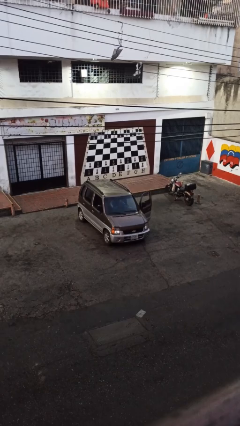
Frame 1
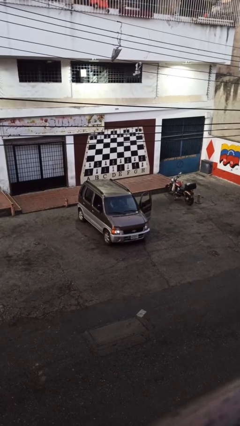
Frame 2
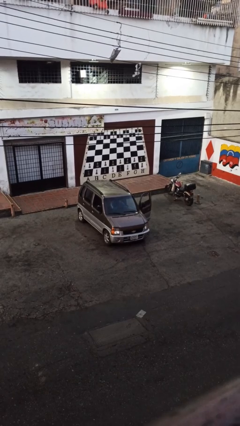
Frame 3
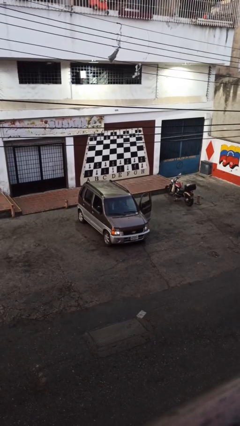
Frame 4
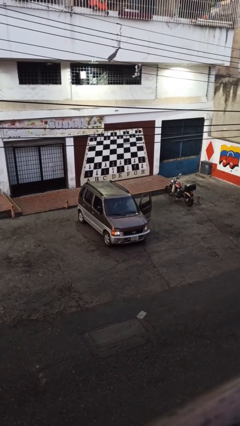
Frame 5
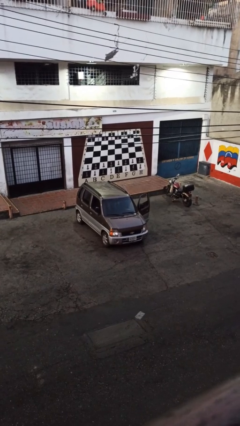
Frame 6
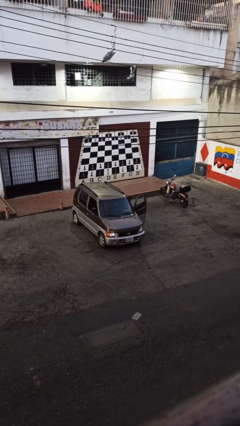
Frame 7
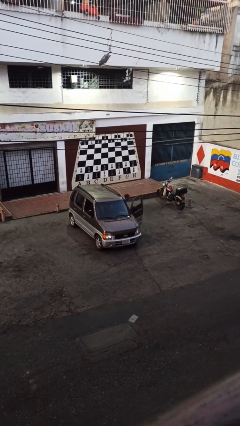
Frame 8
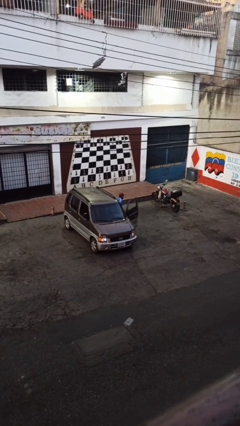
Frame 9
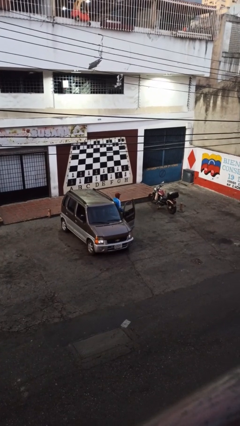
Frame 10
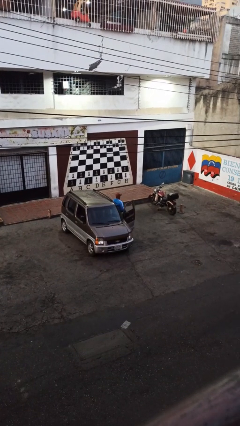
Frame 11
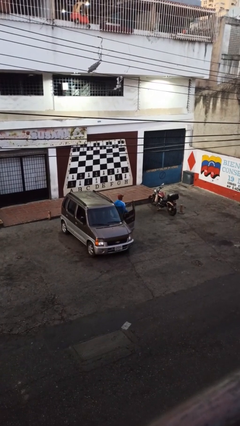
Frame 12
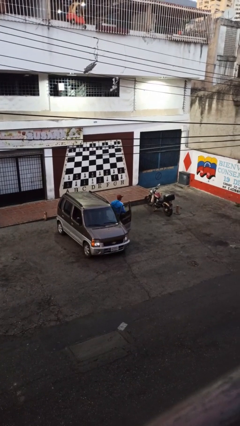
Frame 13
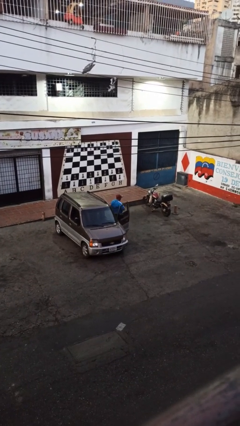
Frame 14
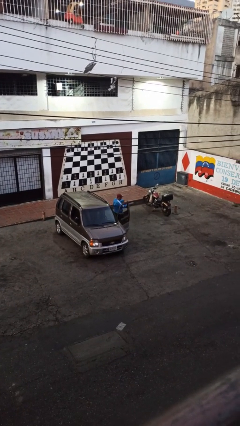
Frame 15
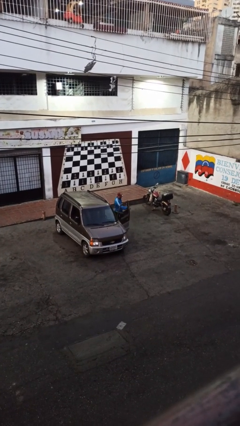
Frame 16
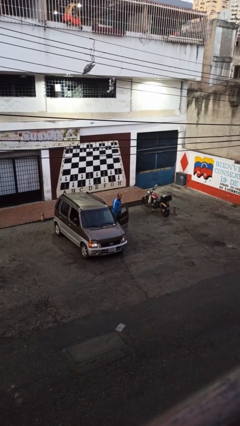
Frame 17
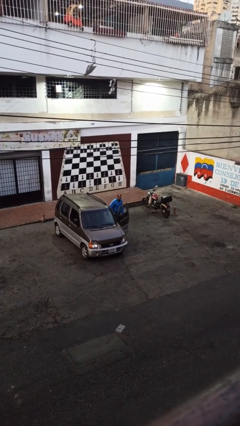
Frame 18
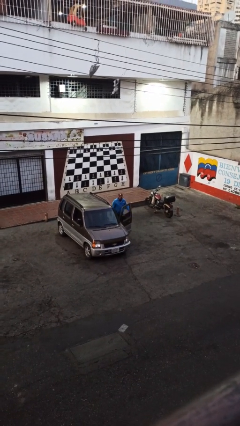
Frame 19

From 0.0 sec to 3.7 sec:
person exits car

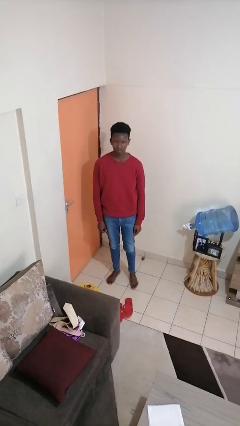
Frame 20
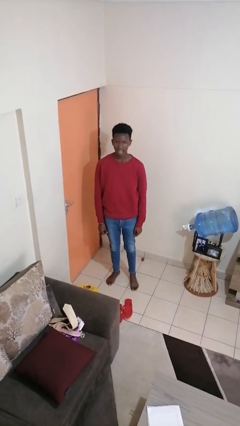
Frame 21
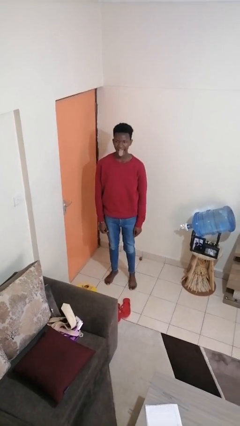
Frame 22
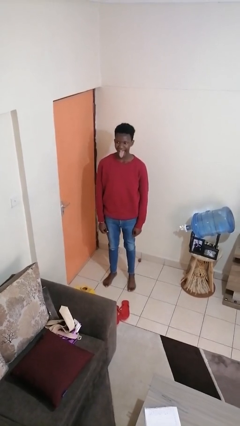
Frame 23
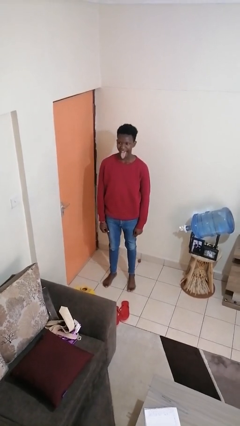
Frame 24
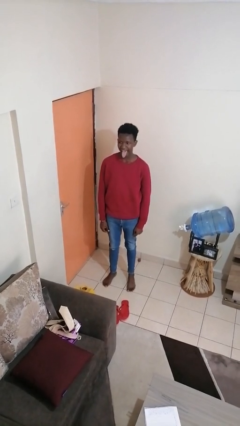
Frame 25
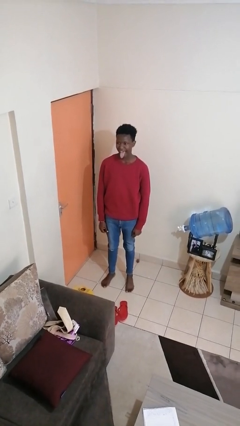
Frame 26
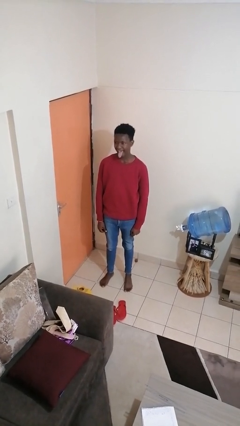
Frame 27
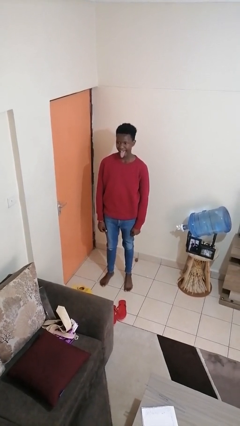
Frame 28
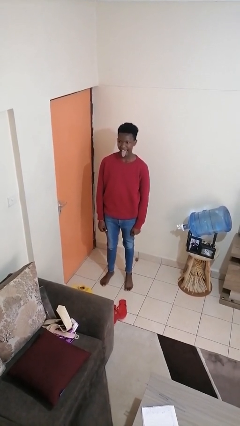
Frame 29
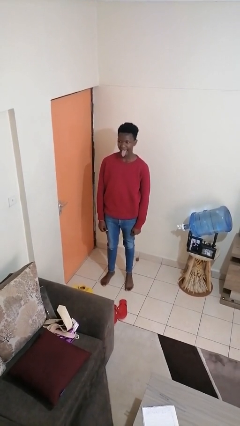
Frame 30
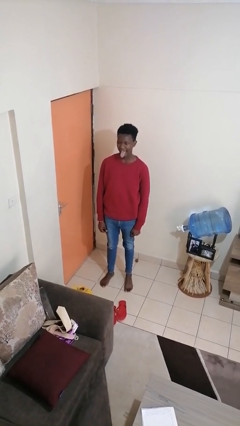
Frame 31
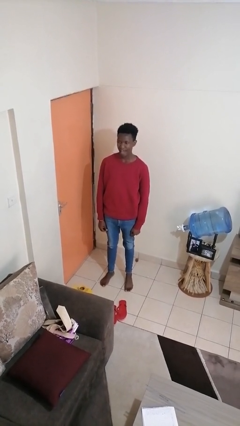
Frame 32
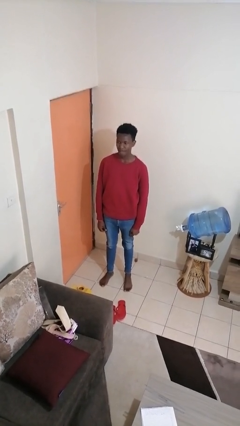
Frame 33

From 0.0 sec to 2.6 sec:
person sticks out tongue

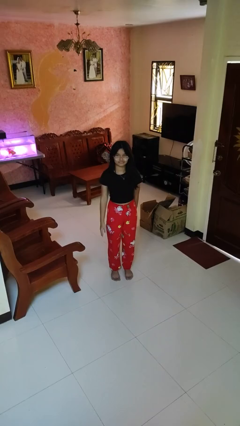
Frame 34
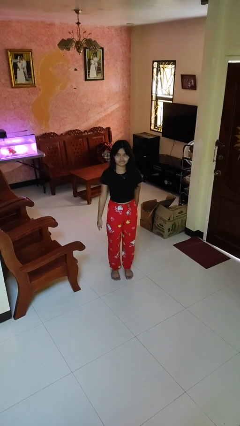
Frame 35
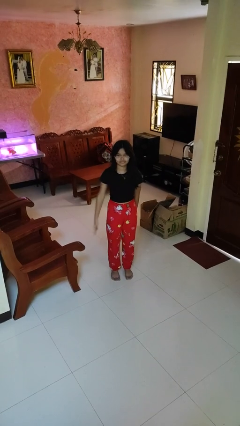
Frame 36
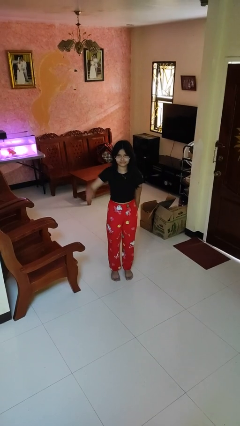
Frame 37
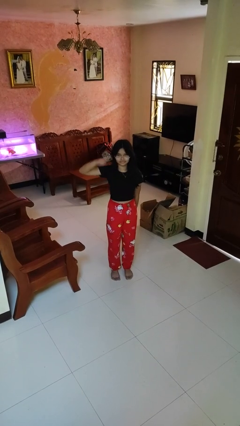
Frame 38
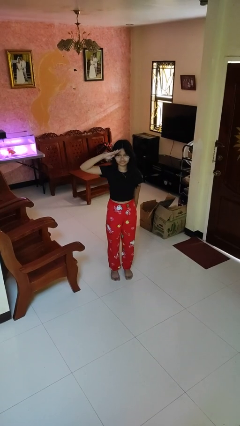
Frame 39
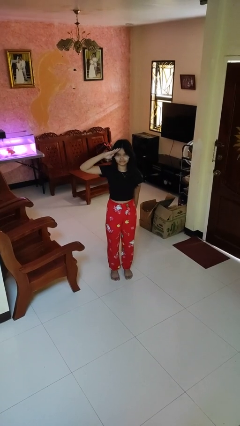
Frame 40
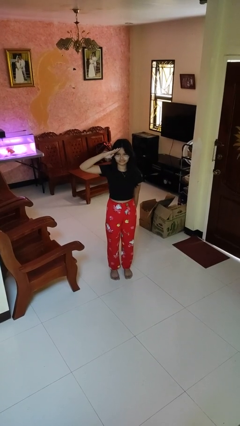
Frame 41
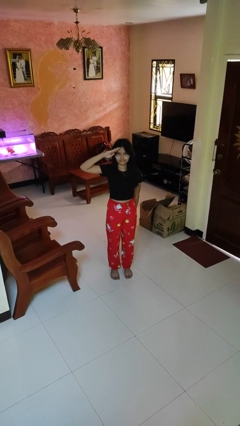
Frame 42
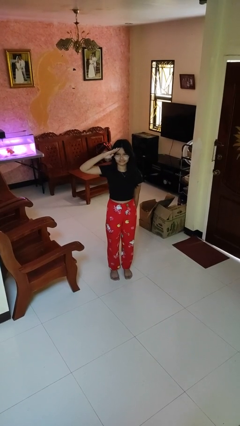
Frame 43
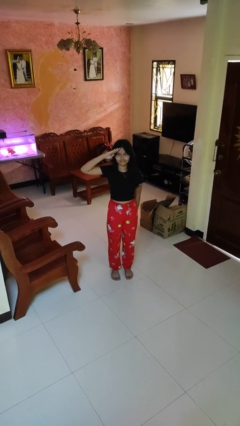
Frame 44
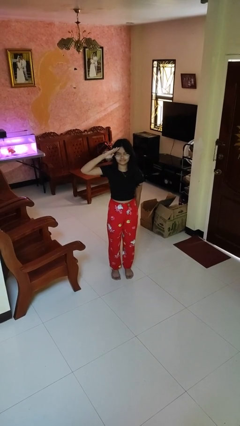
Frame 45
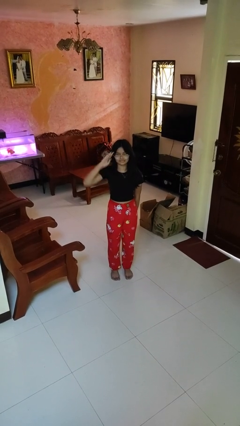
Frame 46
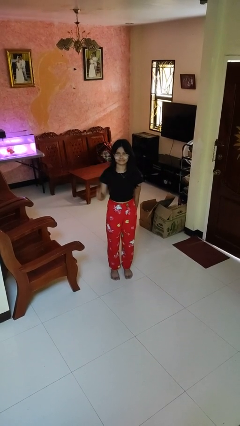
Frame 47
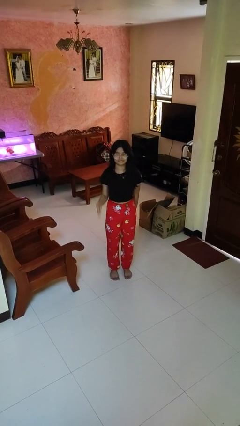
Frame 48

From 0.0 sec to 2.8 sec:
person salutes

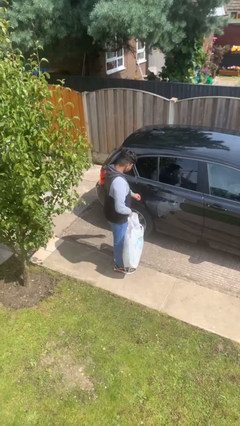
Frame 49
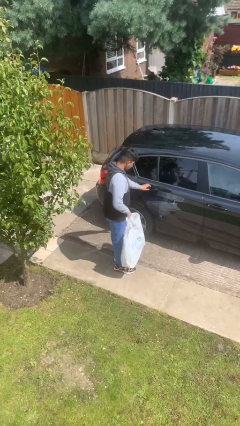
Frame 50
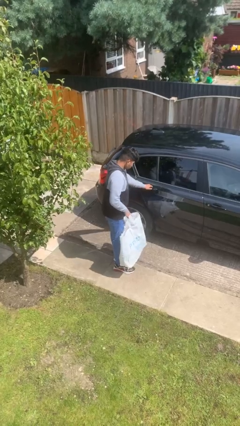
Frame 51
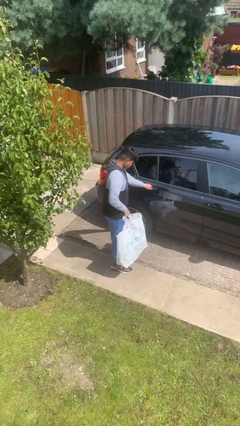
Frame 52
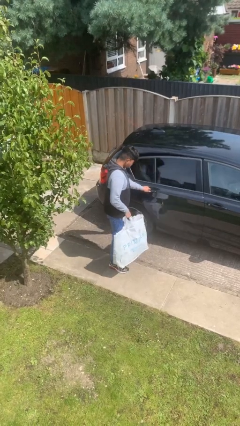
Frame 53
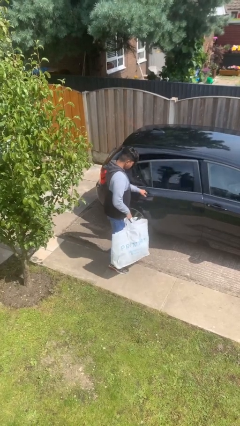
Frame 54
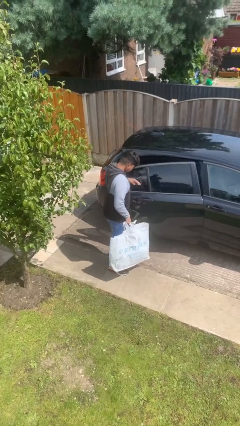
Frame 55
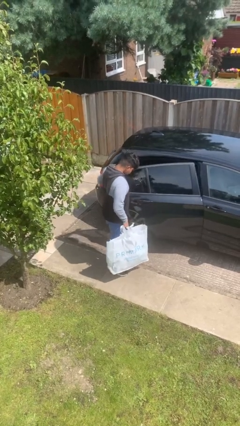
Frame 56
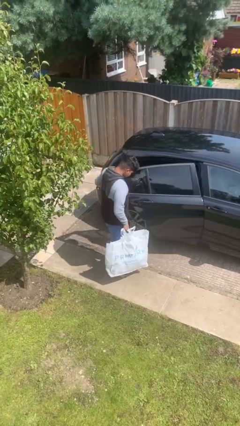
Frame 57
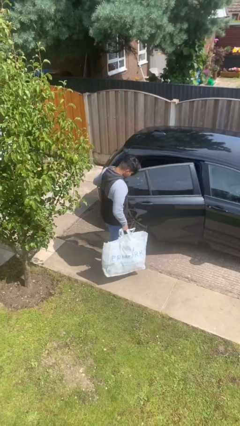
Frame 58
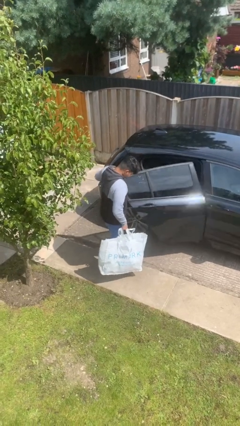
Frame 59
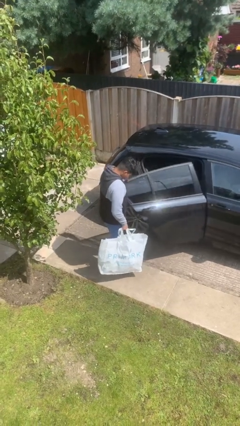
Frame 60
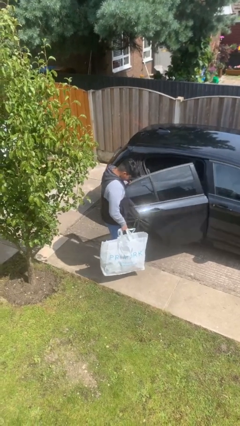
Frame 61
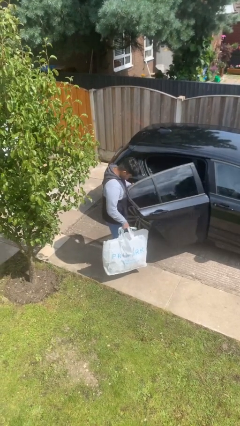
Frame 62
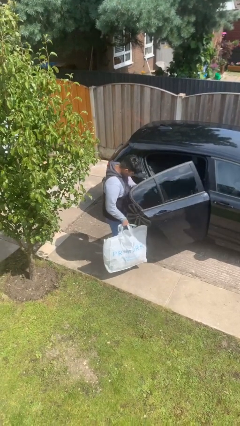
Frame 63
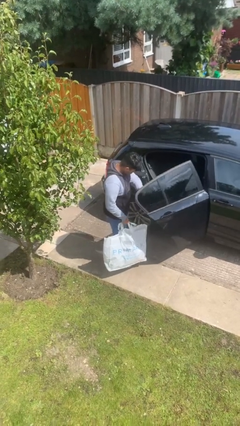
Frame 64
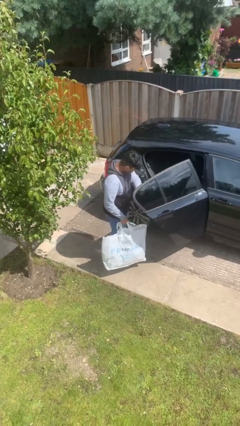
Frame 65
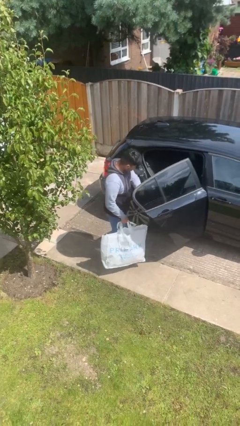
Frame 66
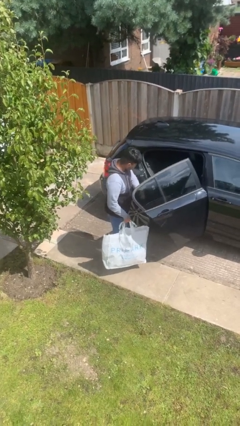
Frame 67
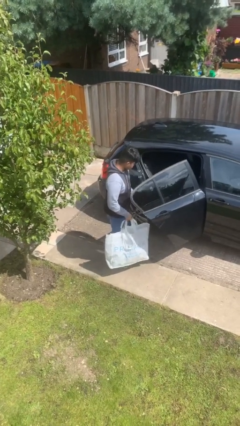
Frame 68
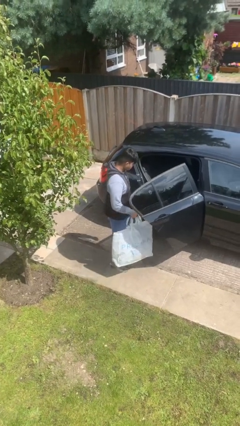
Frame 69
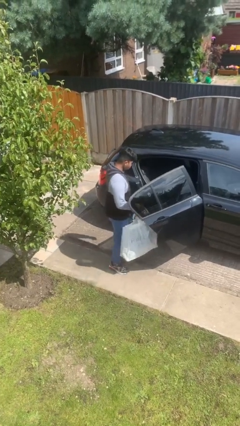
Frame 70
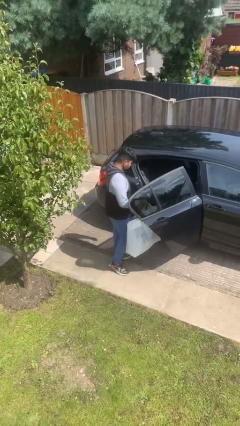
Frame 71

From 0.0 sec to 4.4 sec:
person opens car door

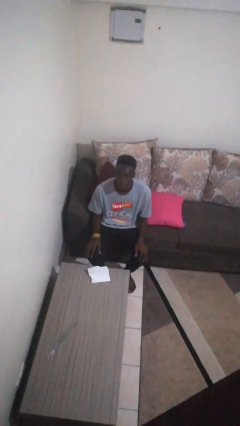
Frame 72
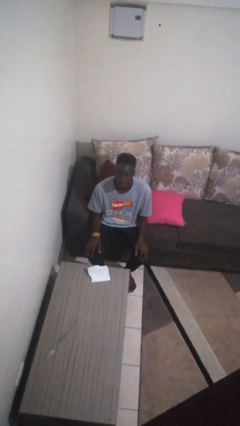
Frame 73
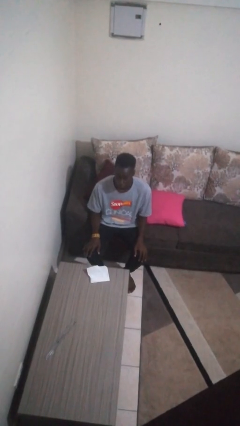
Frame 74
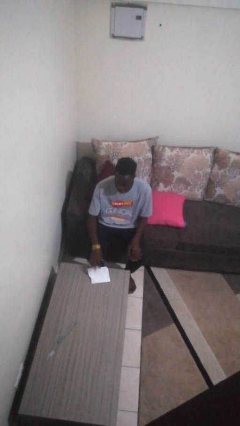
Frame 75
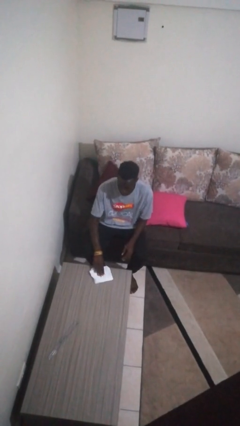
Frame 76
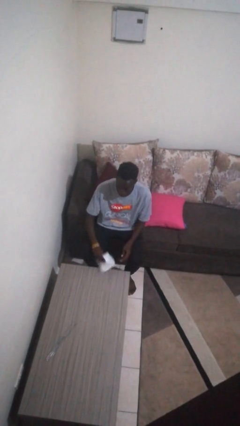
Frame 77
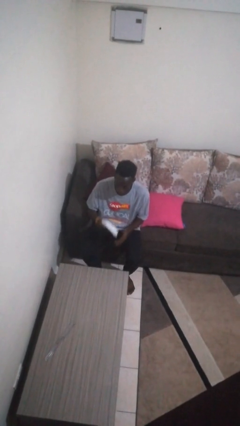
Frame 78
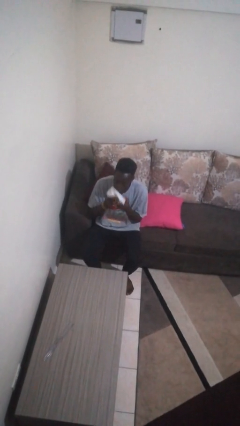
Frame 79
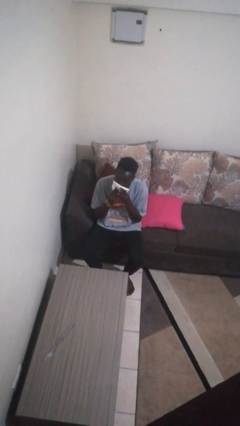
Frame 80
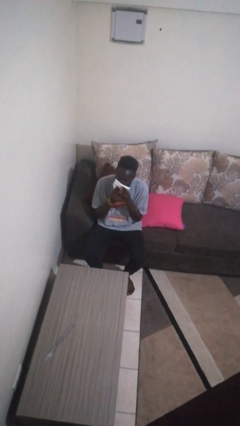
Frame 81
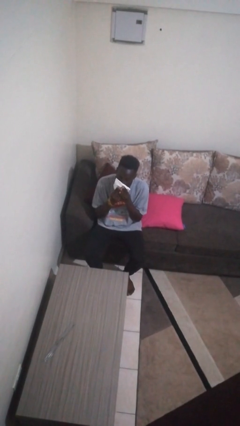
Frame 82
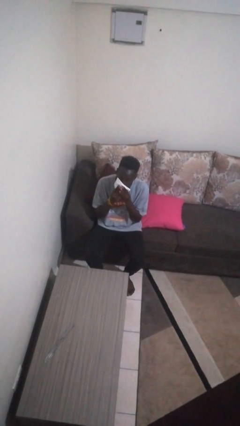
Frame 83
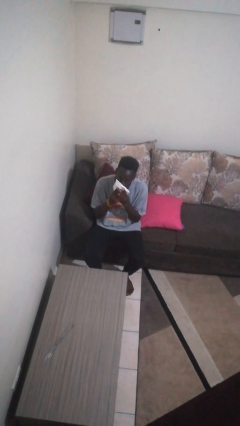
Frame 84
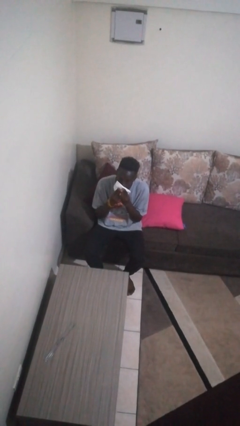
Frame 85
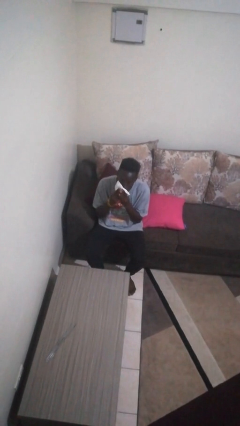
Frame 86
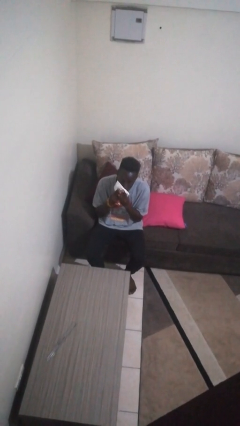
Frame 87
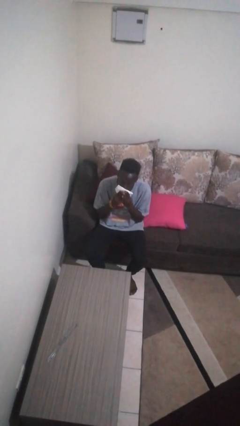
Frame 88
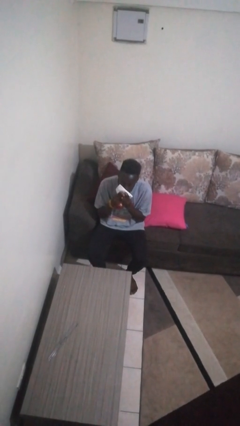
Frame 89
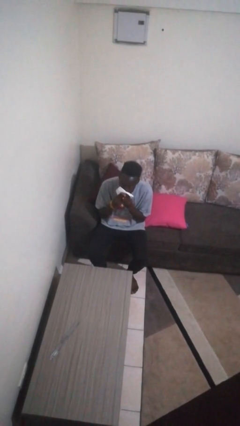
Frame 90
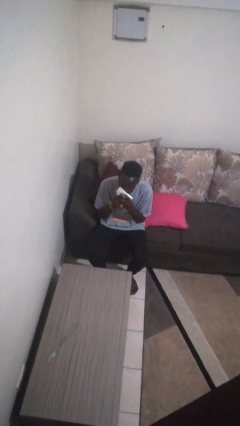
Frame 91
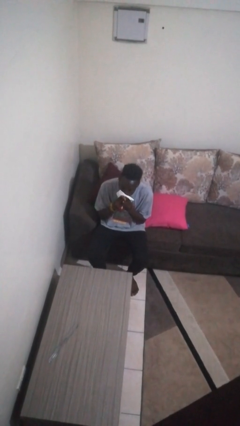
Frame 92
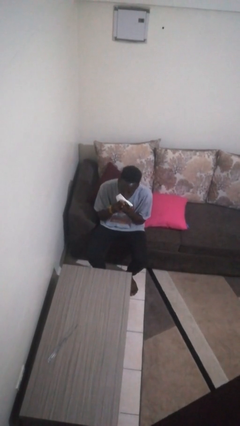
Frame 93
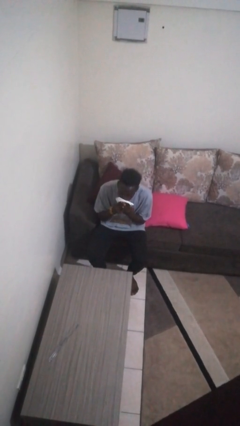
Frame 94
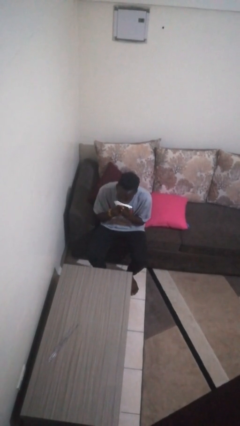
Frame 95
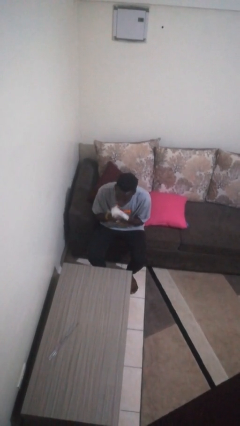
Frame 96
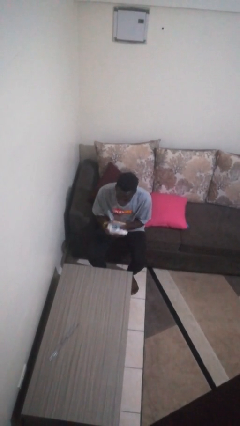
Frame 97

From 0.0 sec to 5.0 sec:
person wipes mouth with napkin
